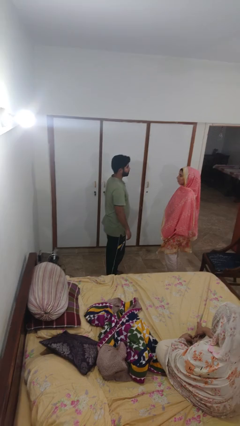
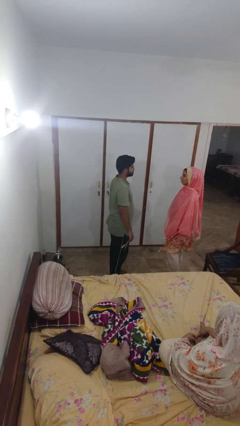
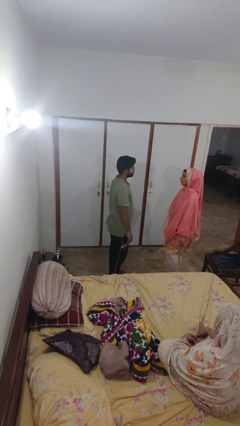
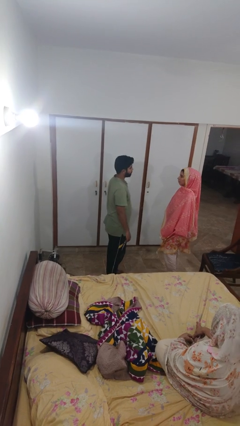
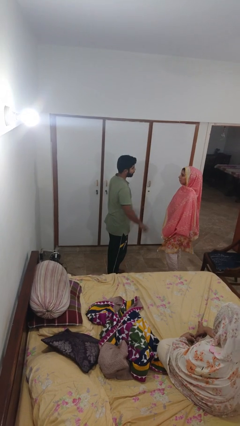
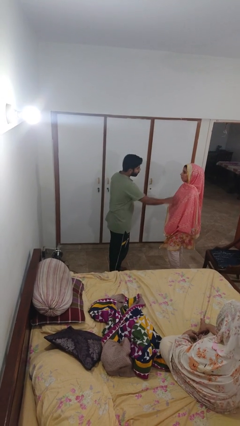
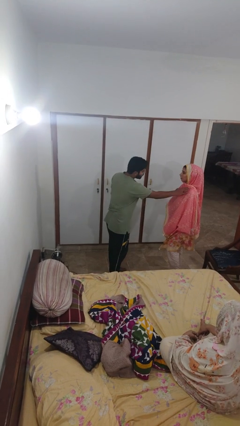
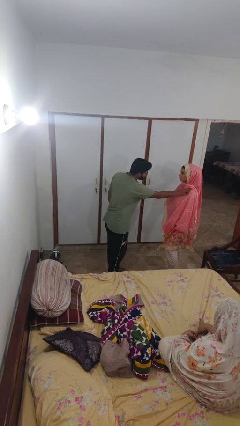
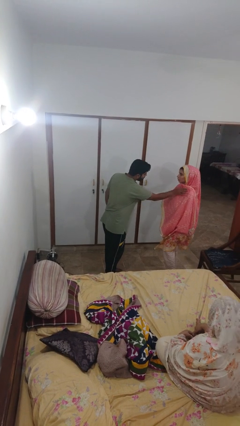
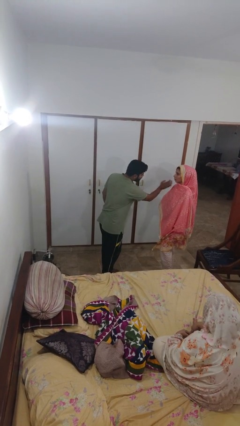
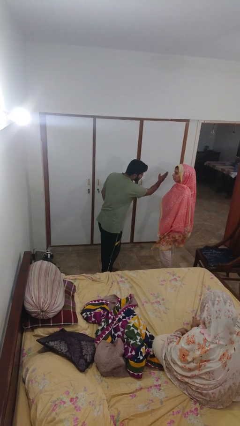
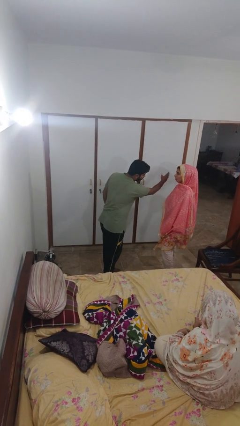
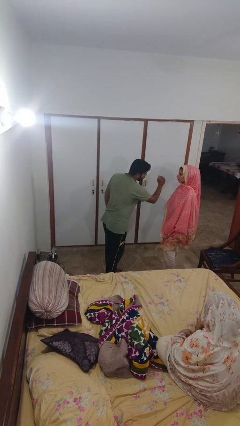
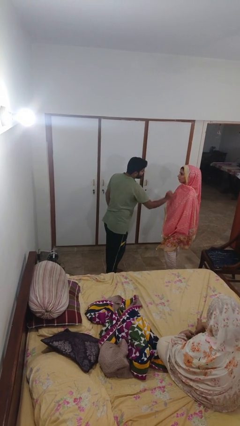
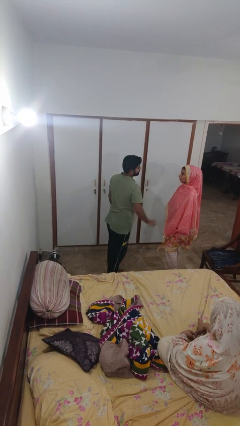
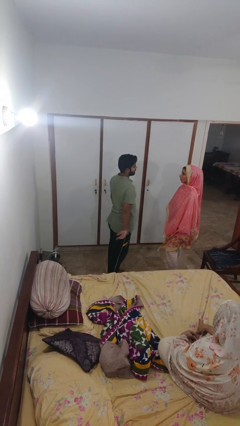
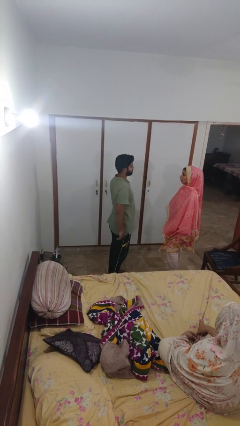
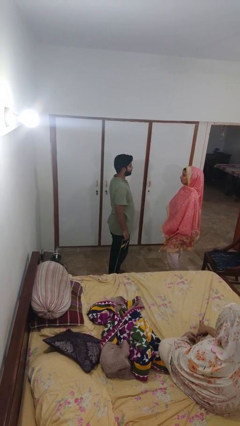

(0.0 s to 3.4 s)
person shoves person

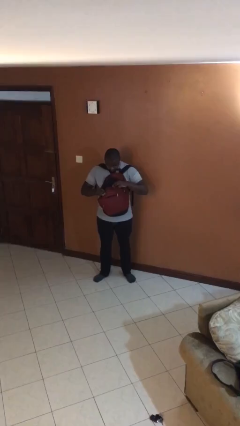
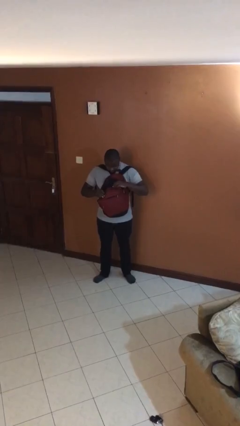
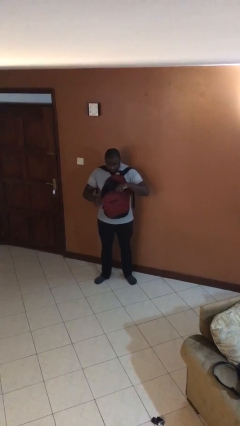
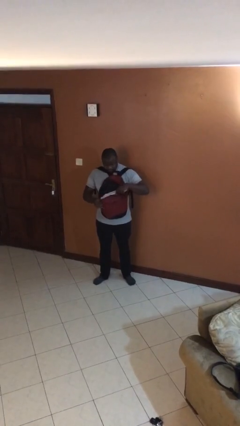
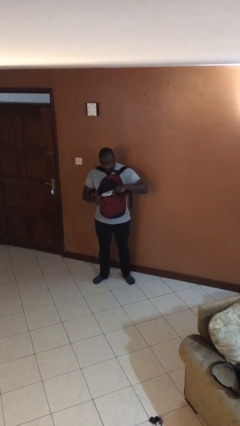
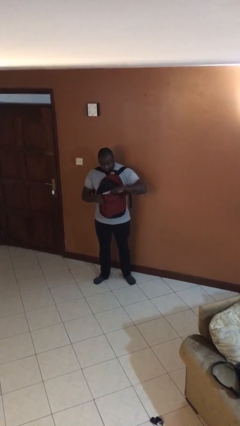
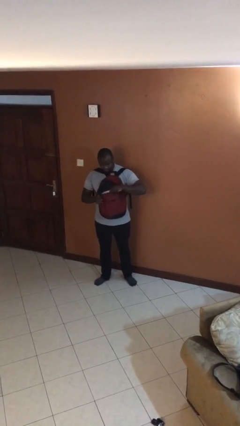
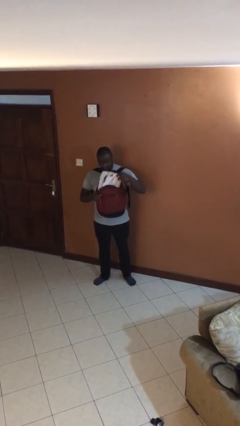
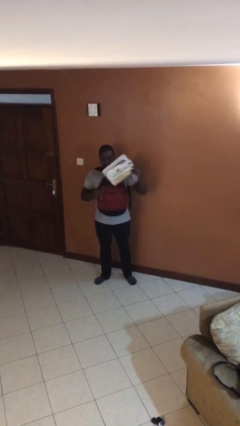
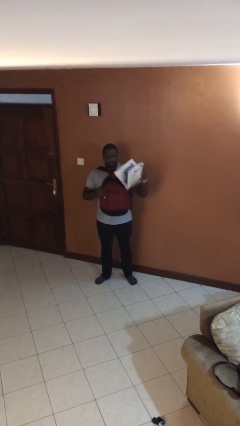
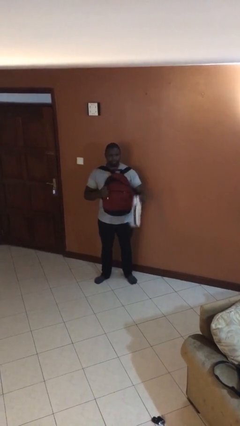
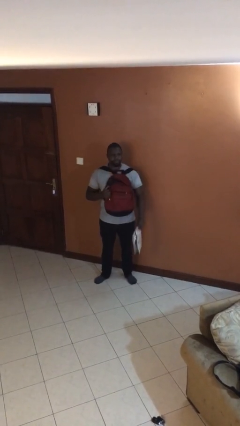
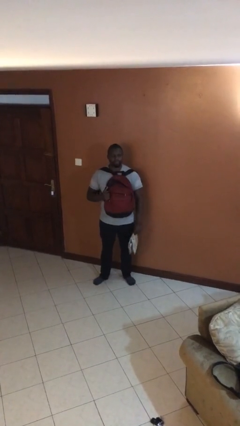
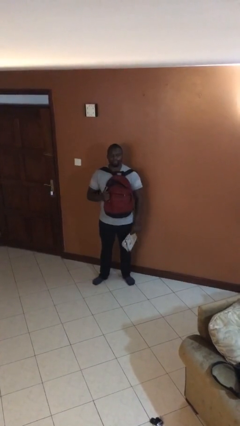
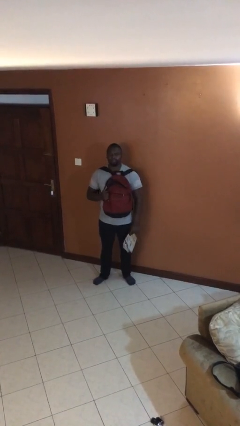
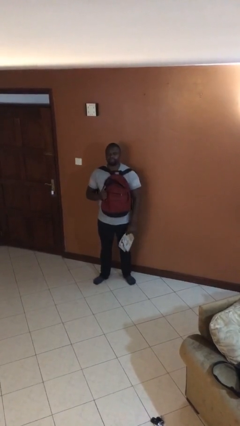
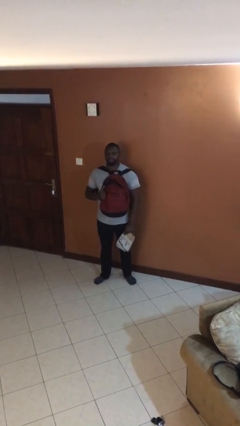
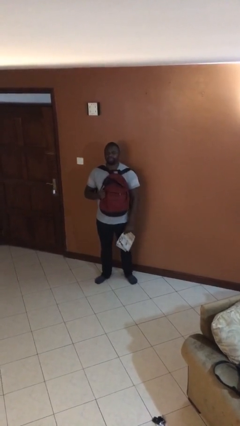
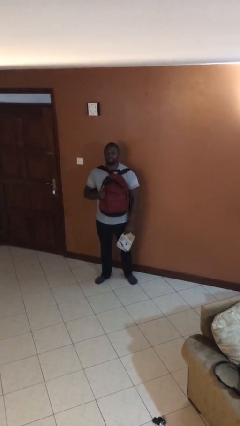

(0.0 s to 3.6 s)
person takes object from backpack

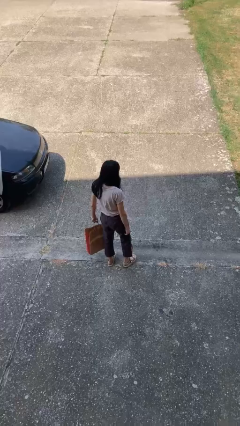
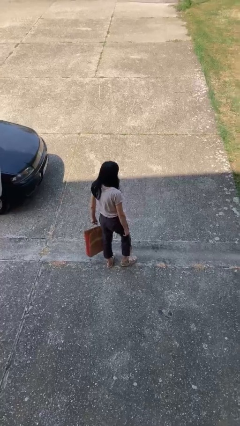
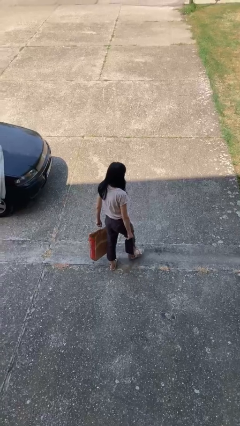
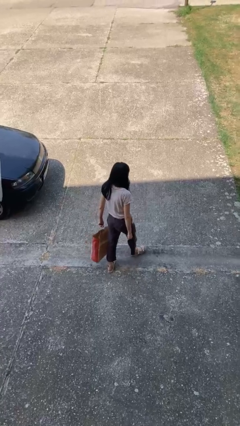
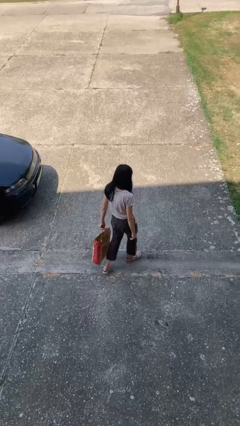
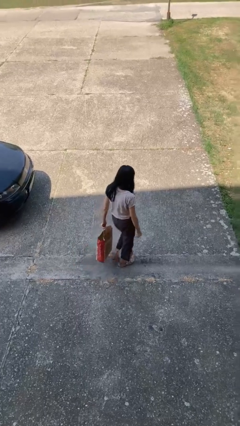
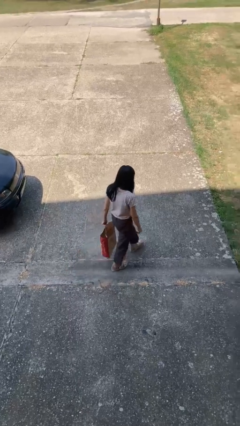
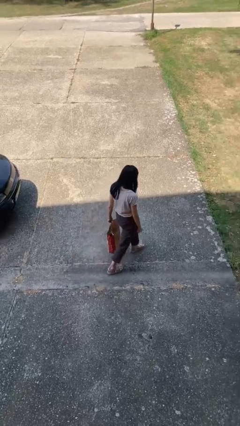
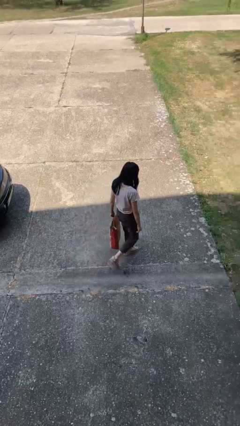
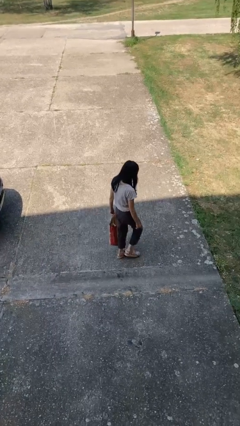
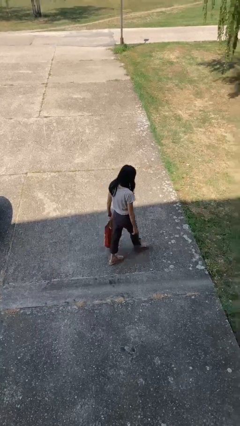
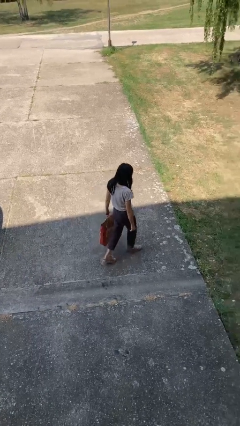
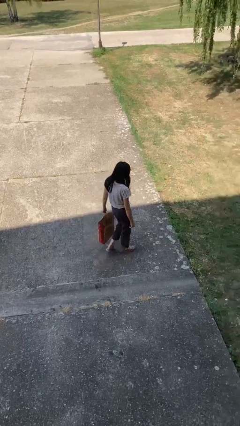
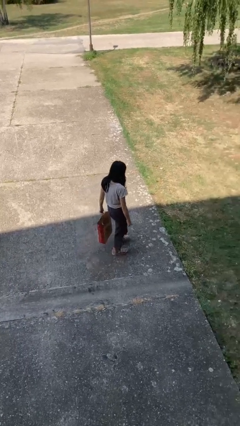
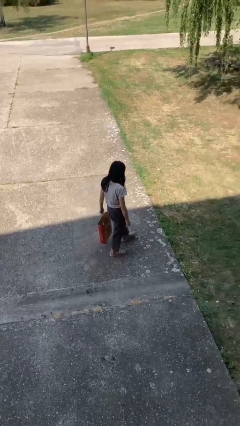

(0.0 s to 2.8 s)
person carries groceries

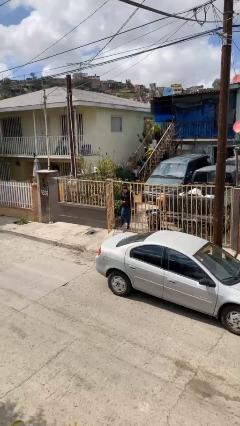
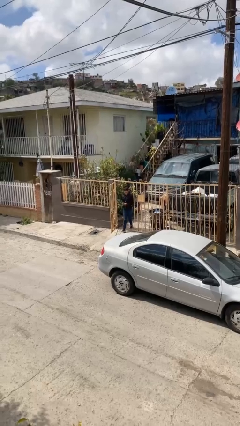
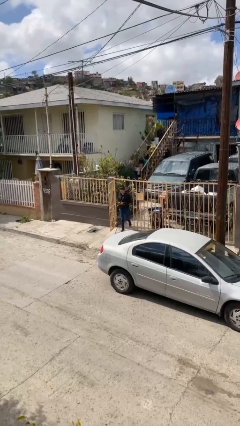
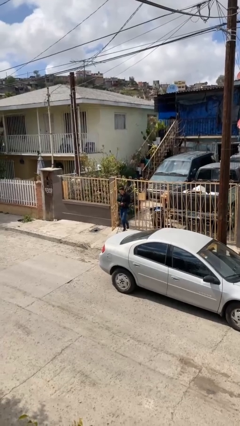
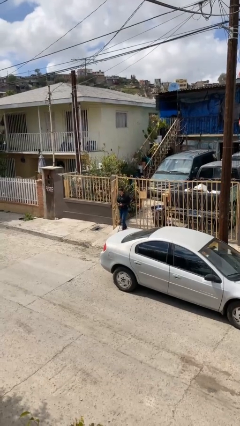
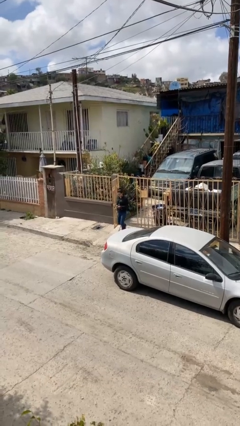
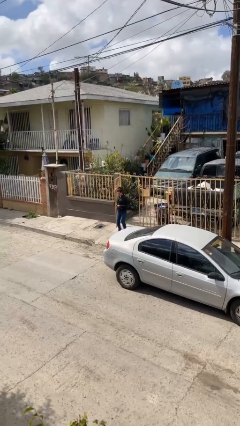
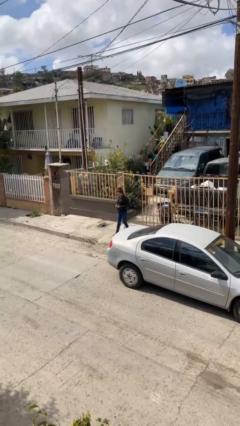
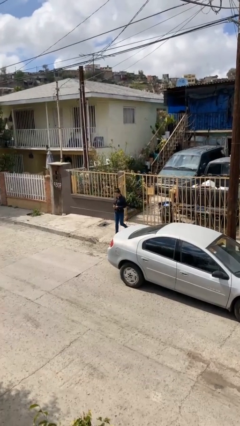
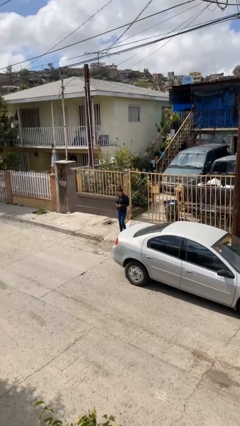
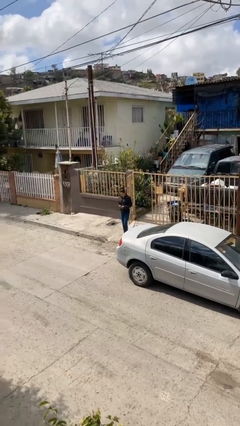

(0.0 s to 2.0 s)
person enters scene through structure

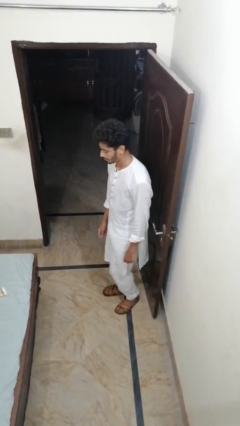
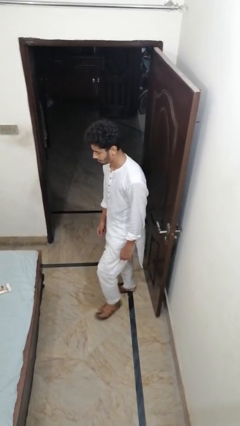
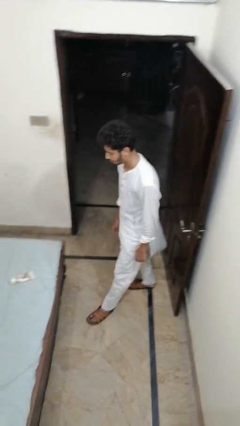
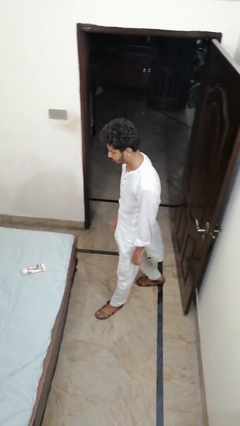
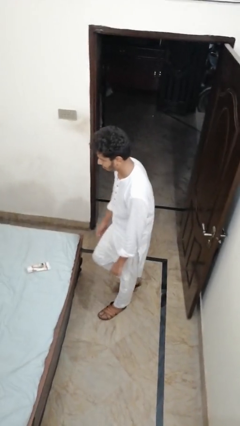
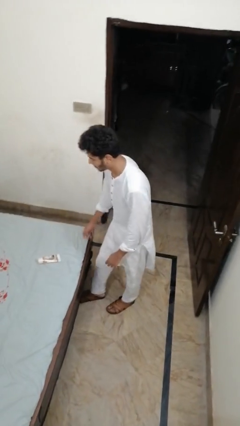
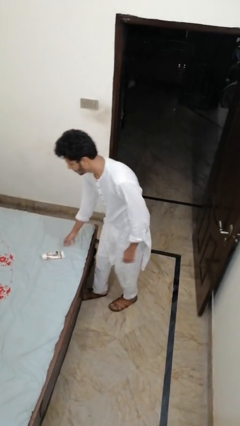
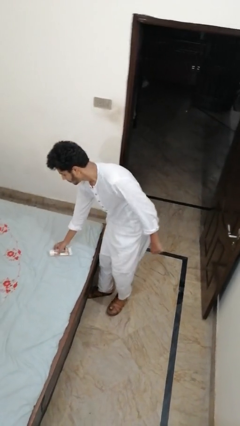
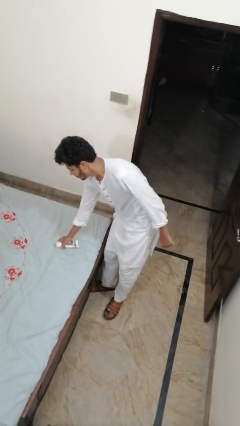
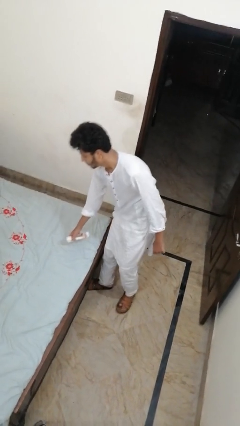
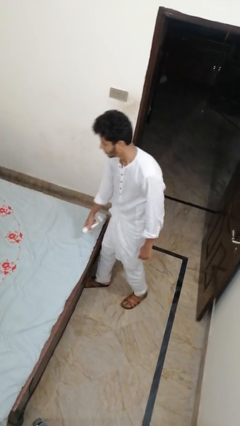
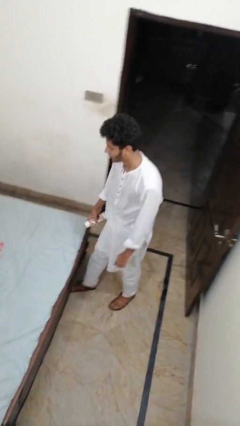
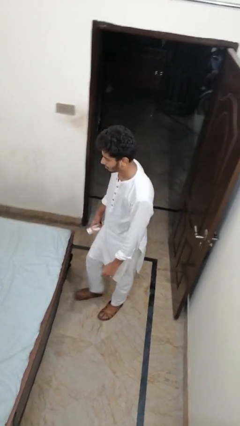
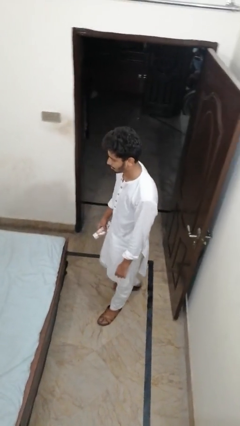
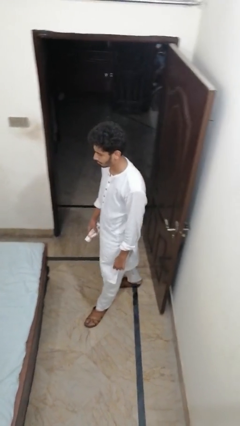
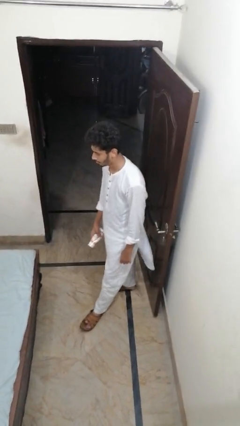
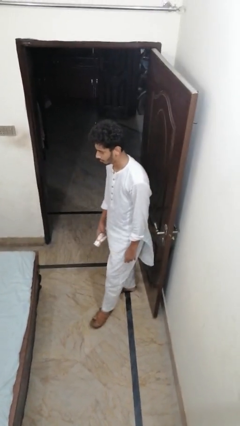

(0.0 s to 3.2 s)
person picks up object from bed

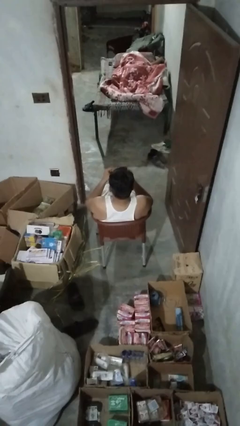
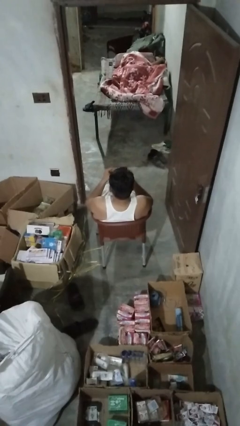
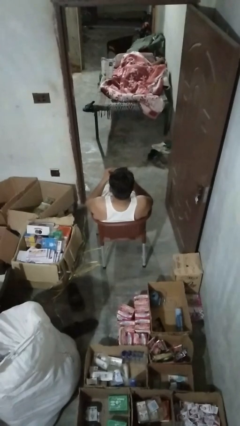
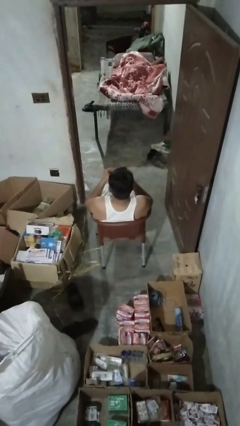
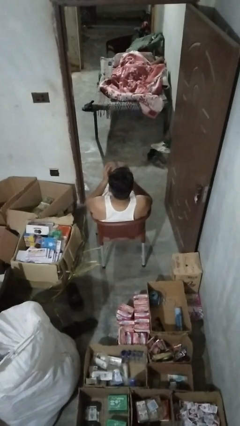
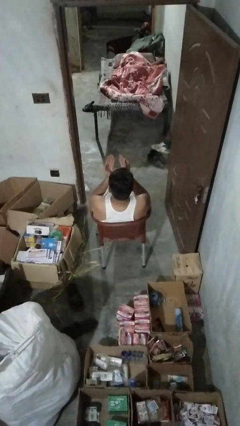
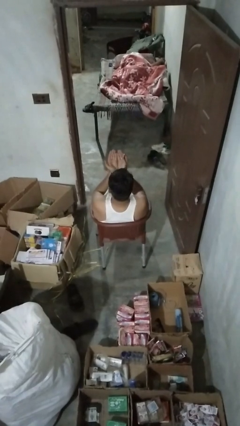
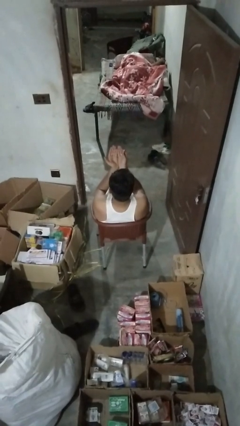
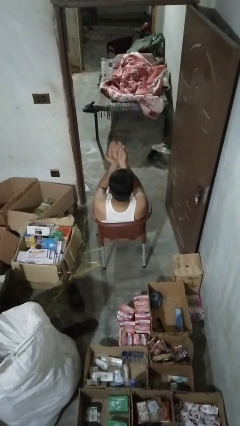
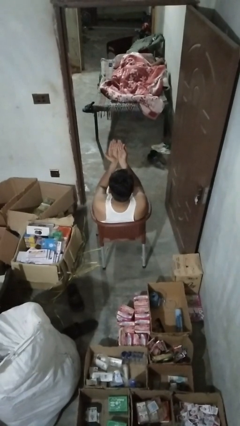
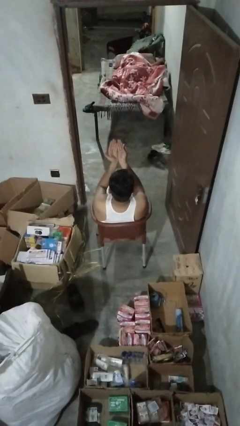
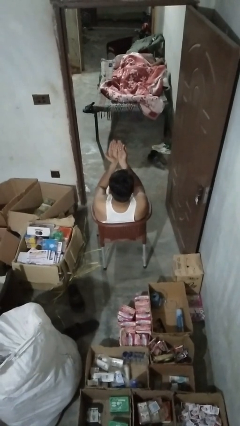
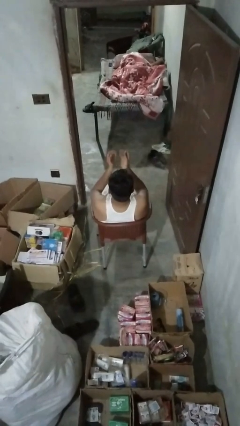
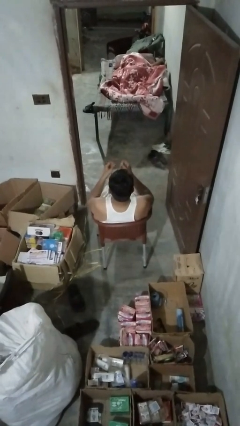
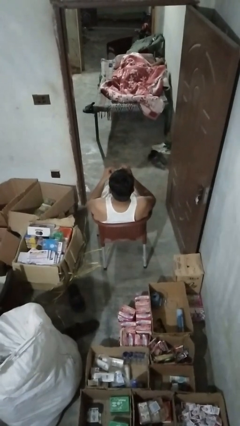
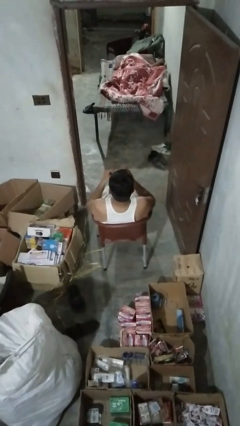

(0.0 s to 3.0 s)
person prays
